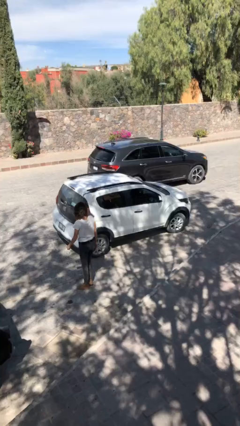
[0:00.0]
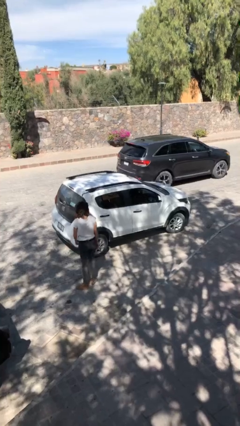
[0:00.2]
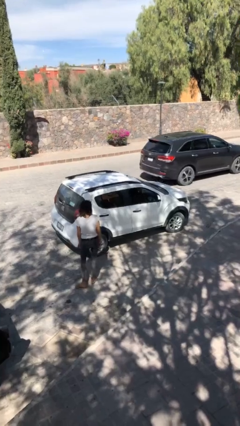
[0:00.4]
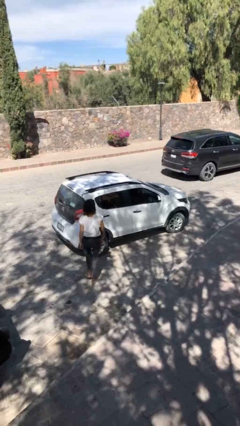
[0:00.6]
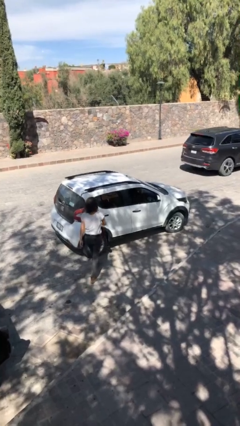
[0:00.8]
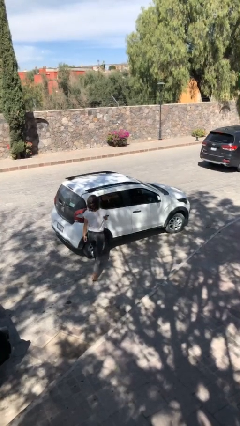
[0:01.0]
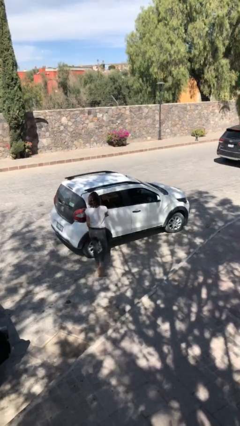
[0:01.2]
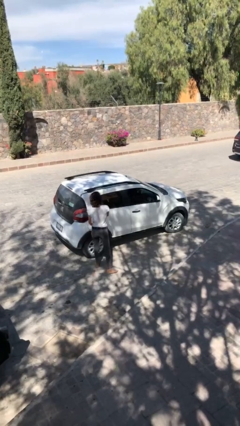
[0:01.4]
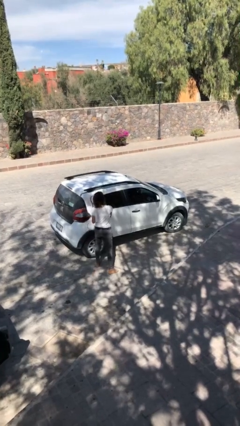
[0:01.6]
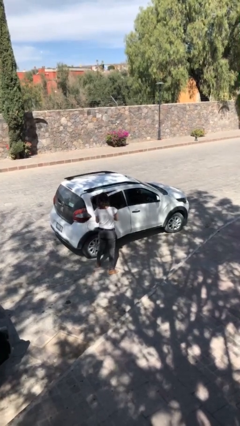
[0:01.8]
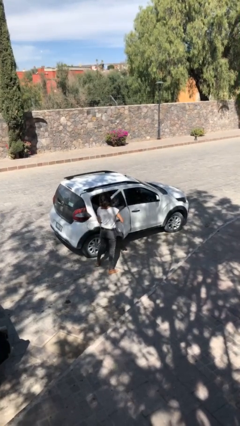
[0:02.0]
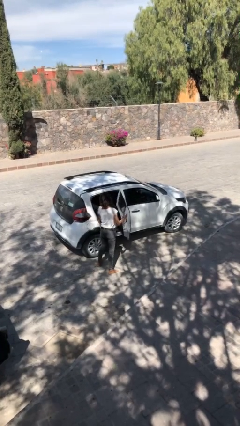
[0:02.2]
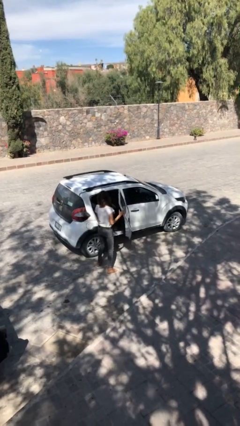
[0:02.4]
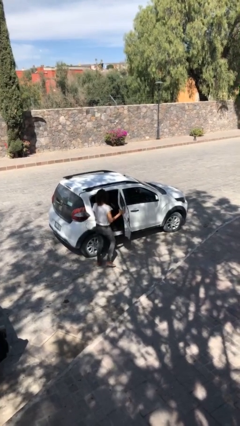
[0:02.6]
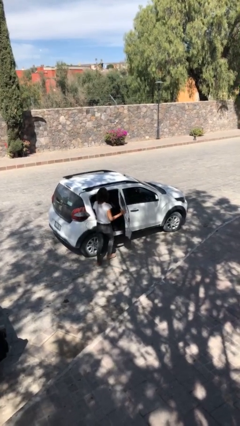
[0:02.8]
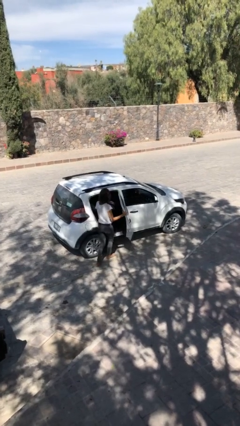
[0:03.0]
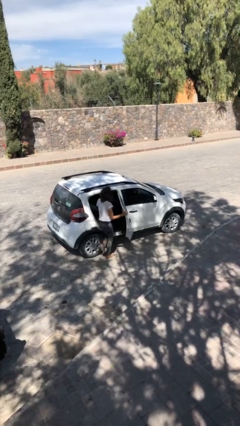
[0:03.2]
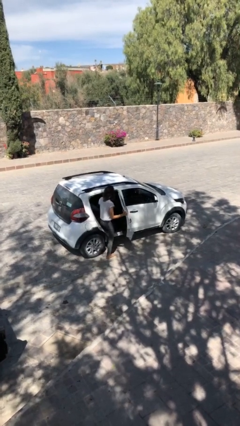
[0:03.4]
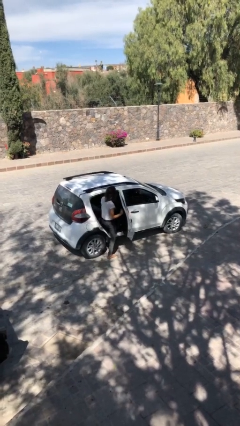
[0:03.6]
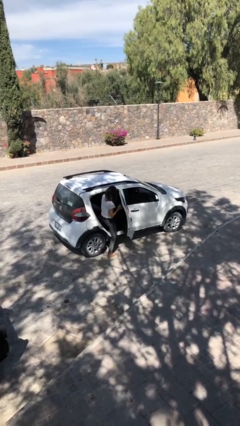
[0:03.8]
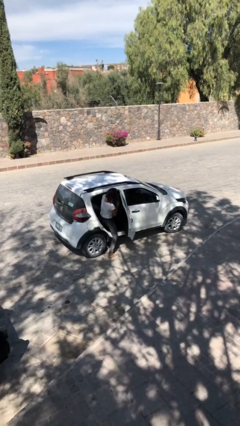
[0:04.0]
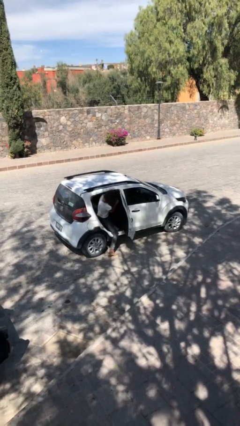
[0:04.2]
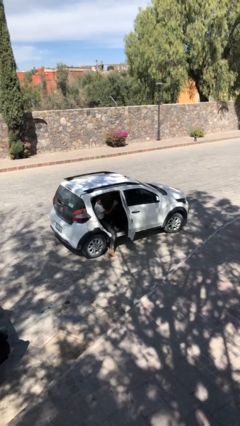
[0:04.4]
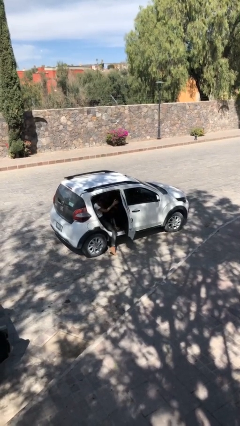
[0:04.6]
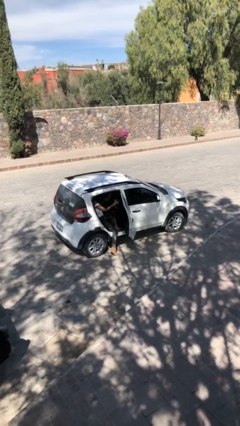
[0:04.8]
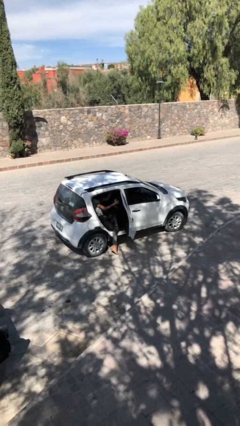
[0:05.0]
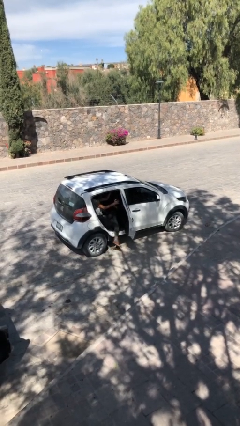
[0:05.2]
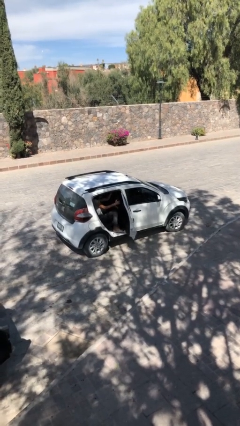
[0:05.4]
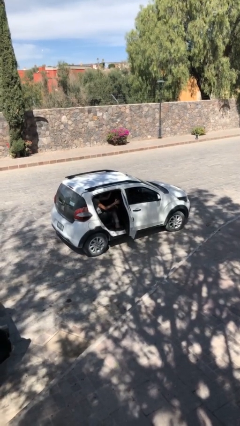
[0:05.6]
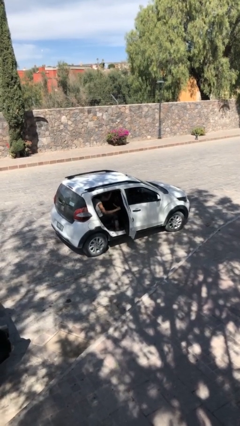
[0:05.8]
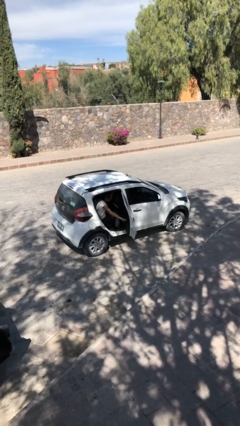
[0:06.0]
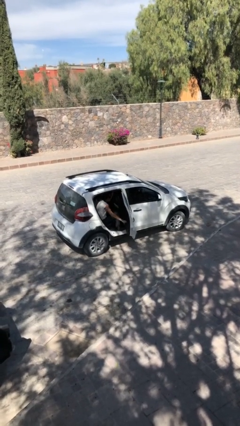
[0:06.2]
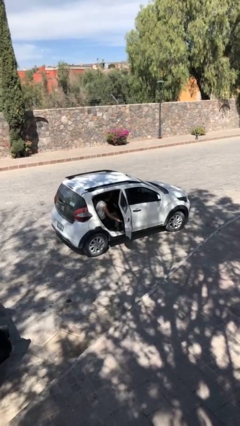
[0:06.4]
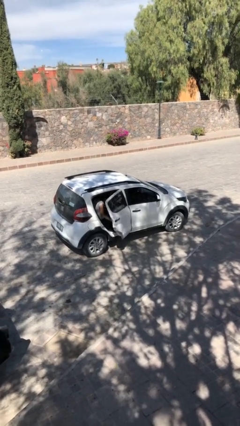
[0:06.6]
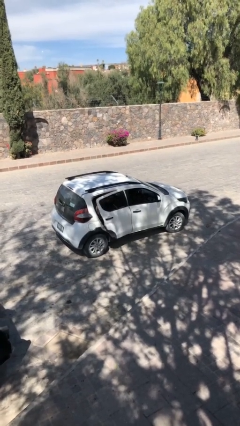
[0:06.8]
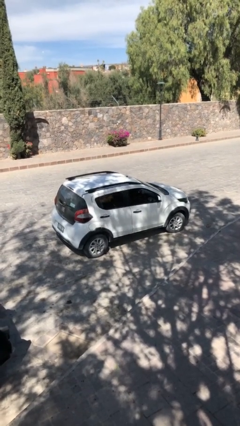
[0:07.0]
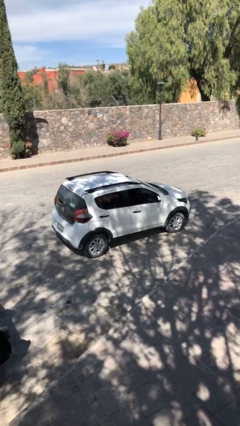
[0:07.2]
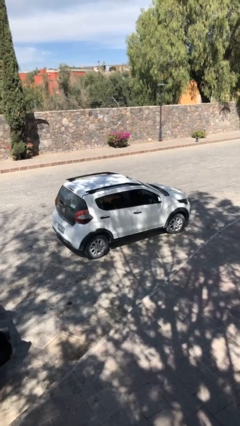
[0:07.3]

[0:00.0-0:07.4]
car picks up person

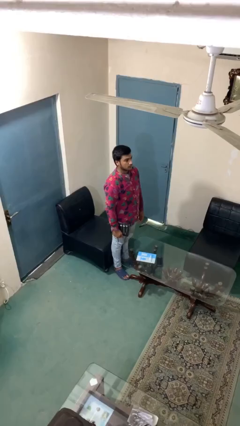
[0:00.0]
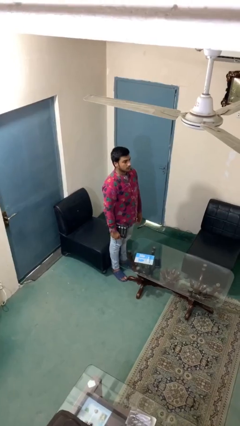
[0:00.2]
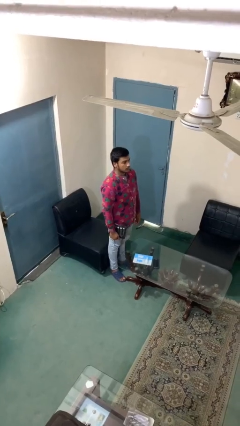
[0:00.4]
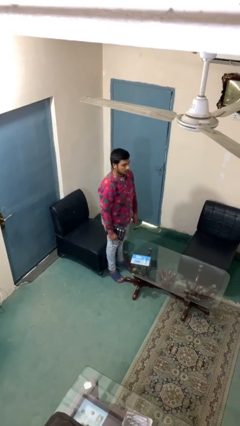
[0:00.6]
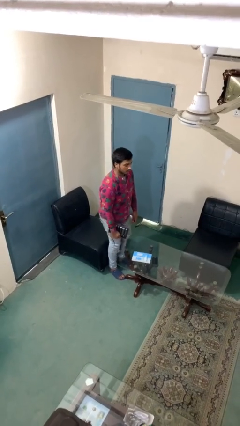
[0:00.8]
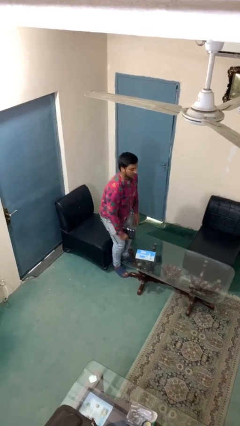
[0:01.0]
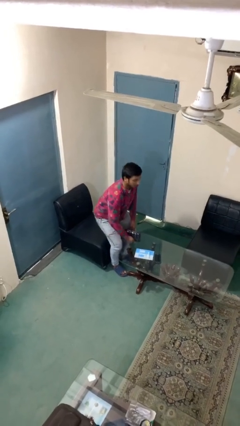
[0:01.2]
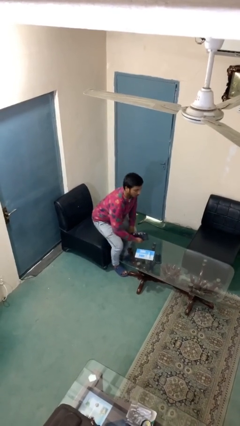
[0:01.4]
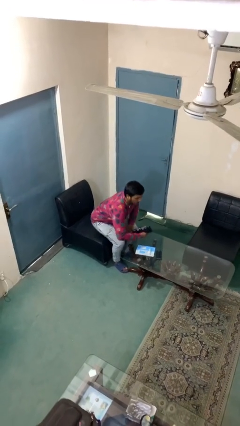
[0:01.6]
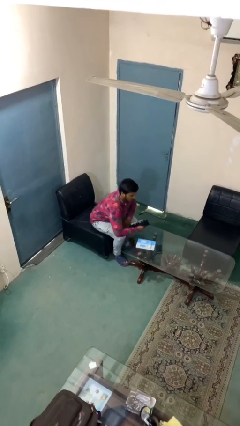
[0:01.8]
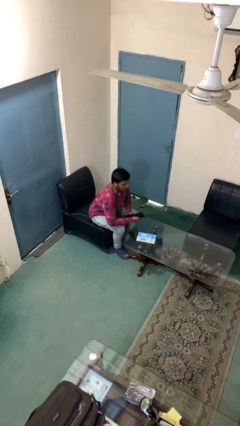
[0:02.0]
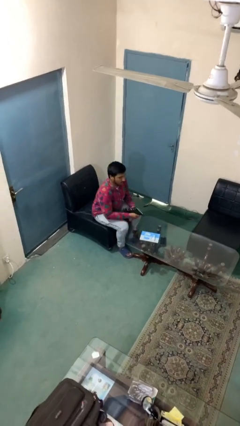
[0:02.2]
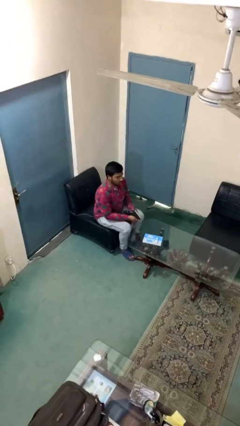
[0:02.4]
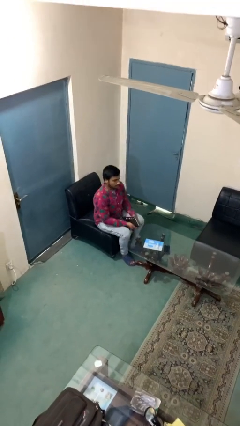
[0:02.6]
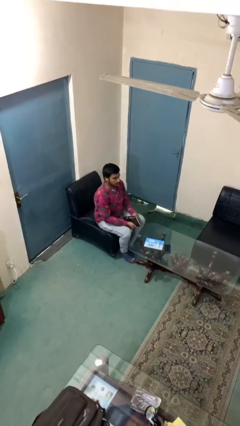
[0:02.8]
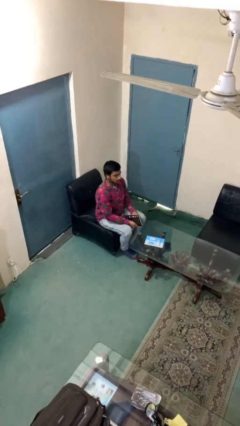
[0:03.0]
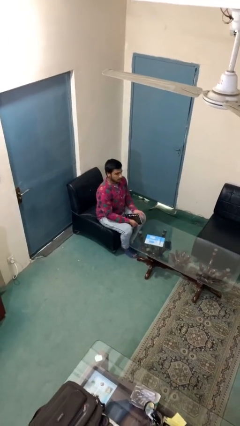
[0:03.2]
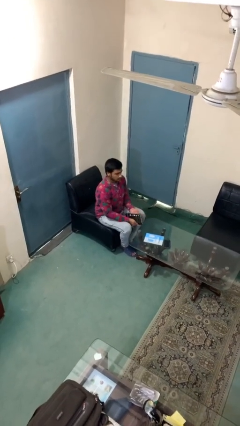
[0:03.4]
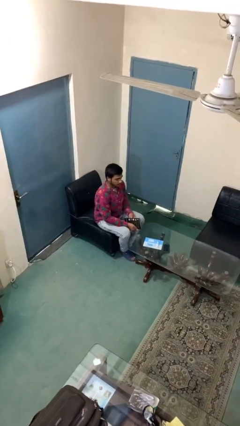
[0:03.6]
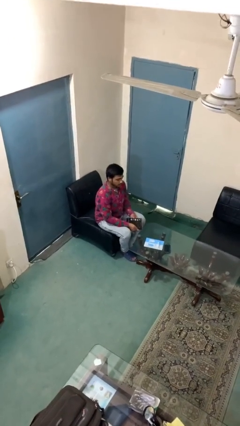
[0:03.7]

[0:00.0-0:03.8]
person sits down

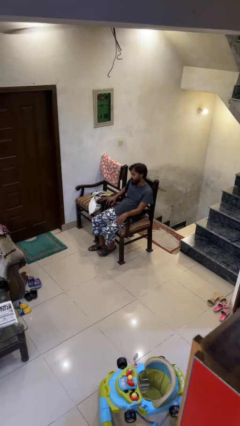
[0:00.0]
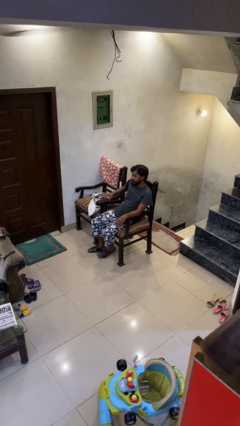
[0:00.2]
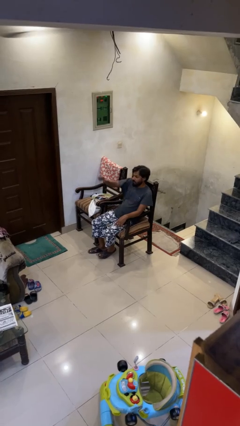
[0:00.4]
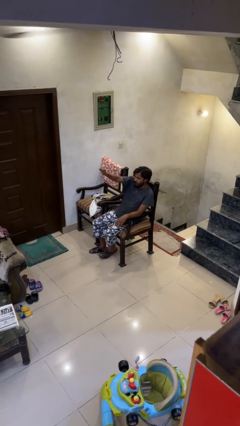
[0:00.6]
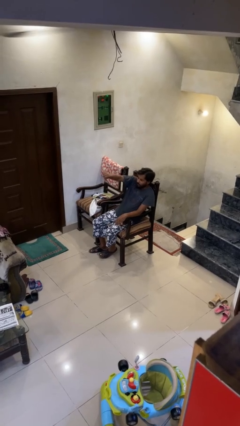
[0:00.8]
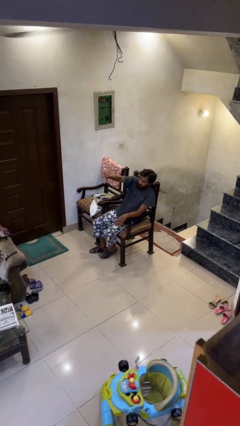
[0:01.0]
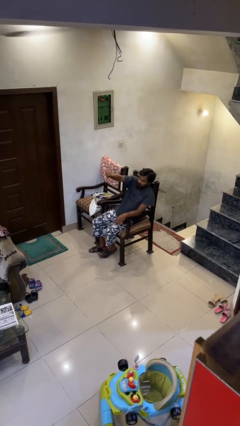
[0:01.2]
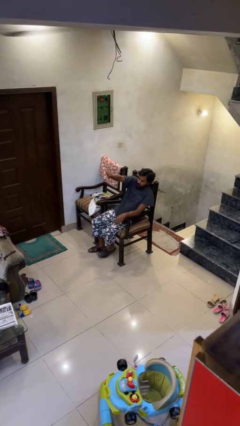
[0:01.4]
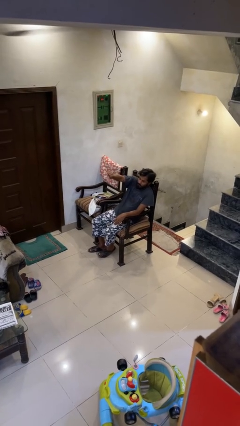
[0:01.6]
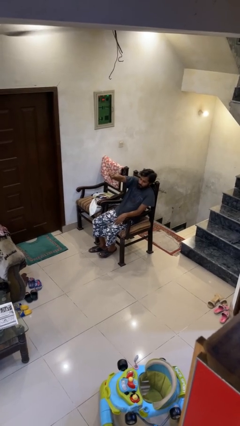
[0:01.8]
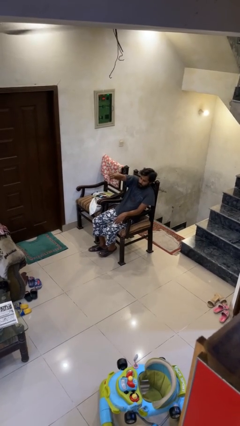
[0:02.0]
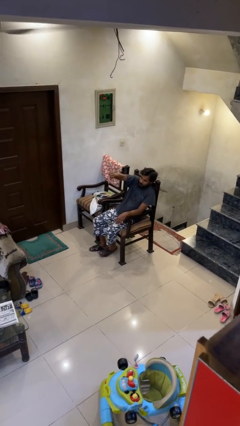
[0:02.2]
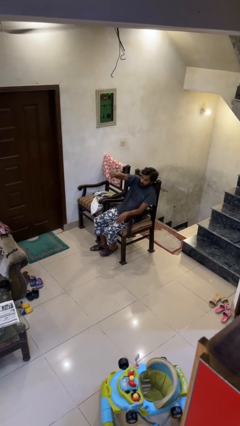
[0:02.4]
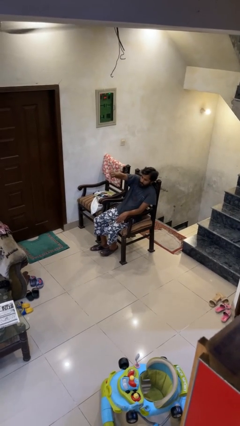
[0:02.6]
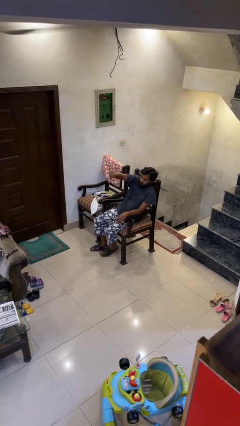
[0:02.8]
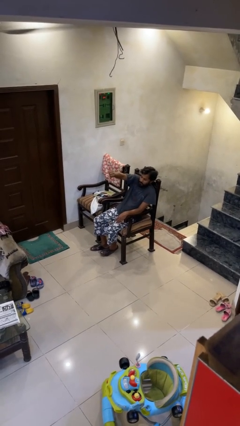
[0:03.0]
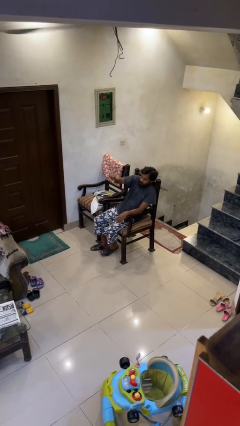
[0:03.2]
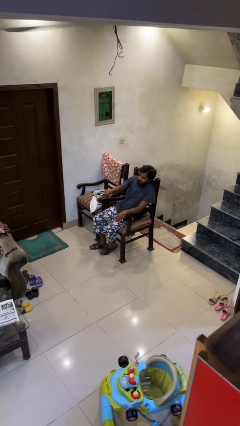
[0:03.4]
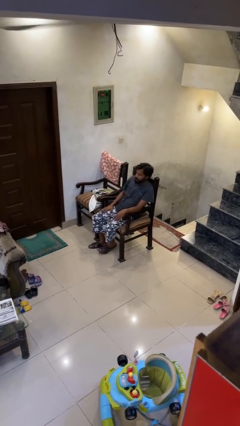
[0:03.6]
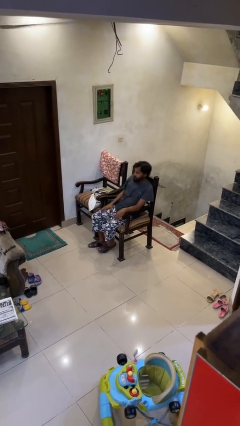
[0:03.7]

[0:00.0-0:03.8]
person gestures thumbs down

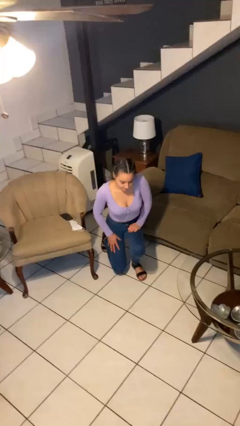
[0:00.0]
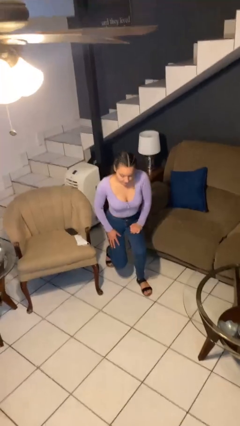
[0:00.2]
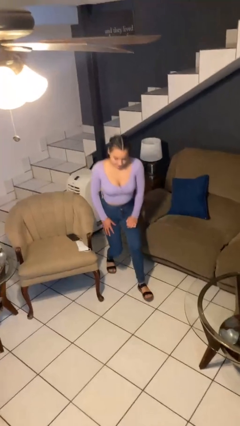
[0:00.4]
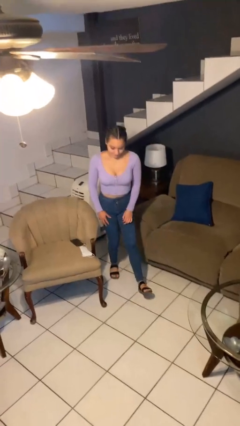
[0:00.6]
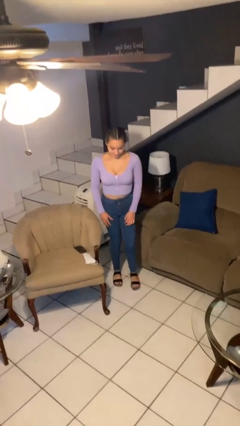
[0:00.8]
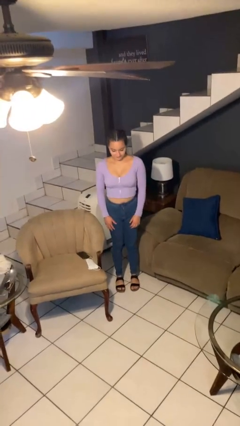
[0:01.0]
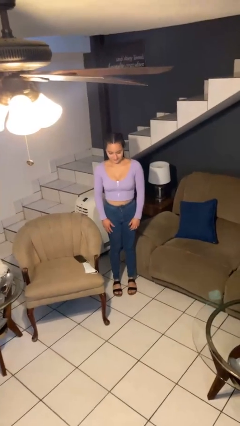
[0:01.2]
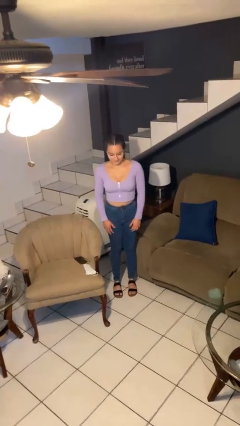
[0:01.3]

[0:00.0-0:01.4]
person stands up from floor

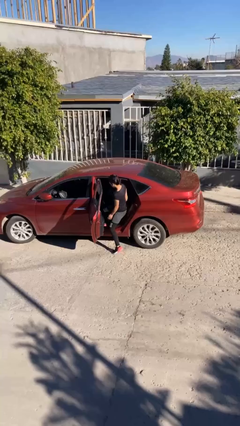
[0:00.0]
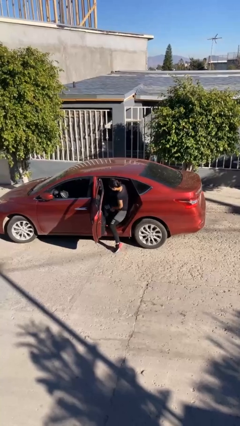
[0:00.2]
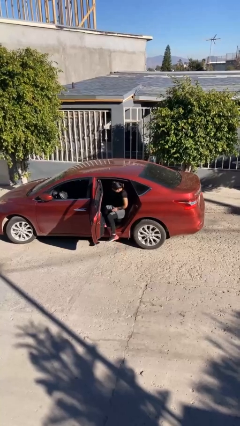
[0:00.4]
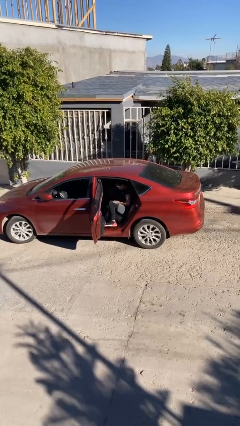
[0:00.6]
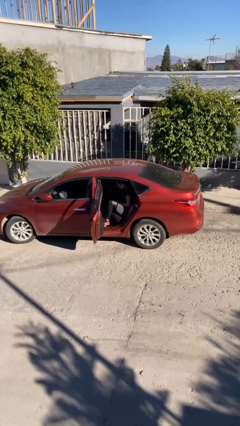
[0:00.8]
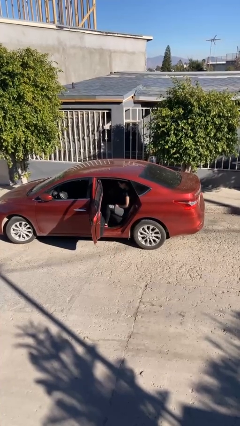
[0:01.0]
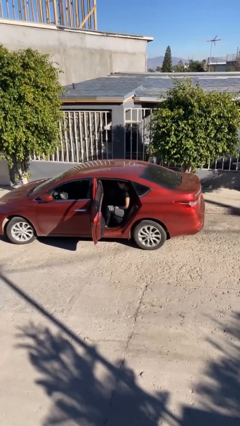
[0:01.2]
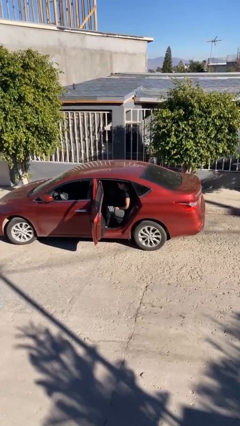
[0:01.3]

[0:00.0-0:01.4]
person enters car
